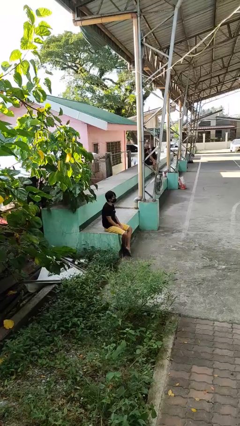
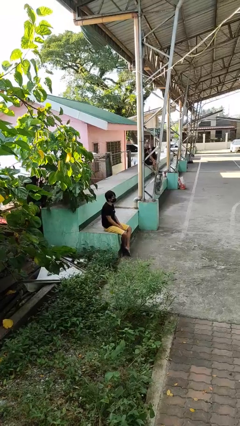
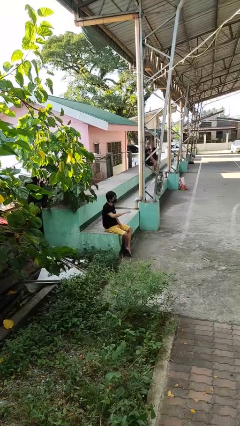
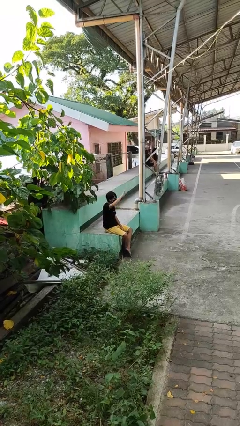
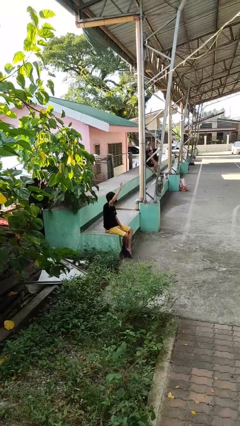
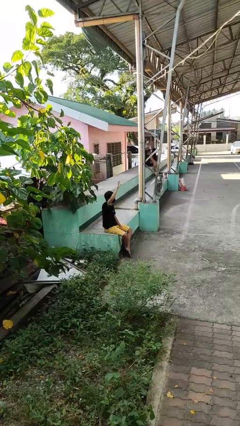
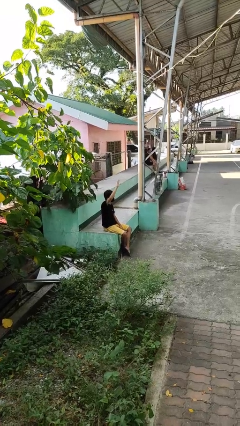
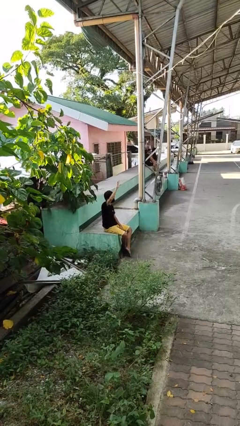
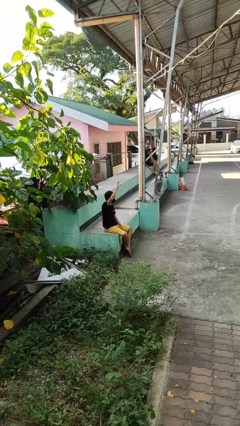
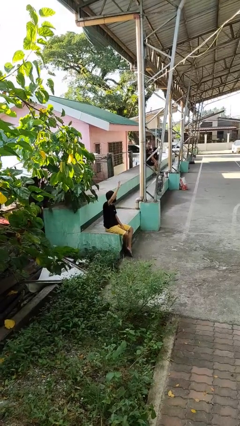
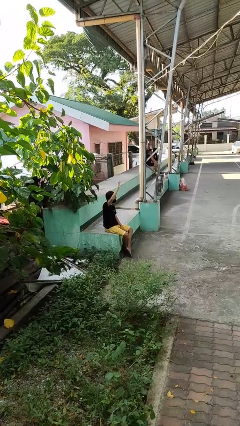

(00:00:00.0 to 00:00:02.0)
person gestures raise hand

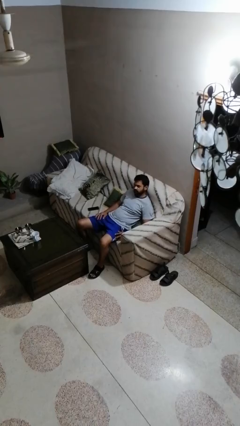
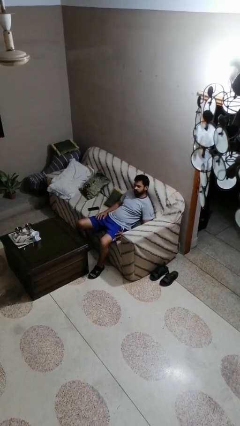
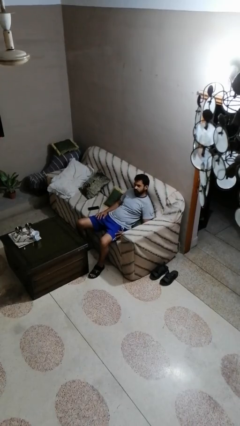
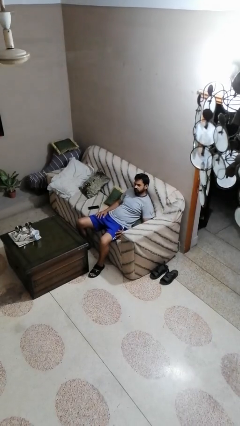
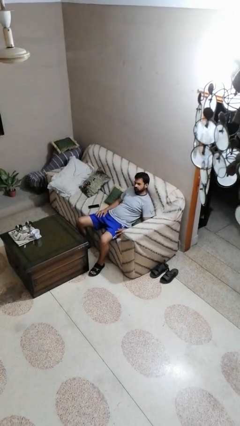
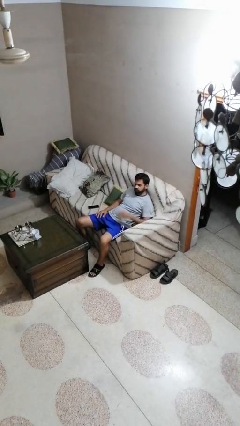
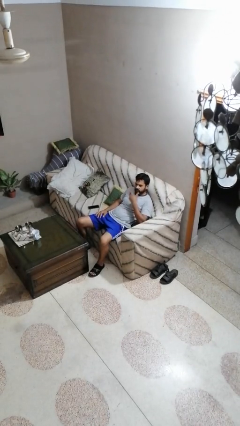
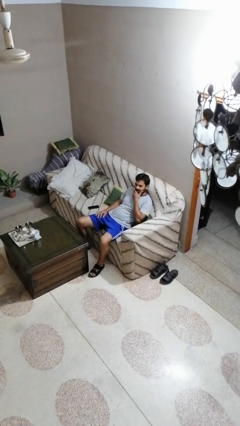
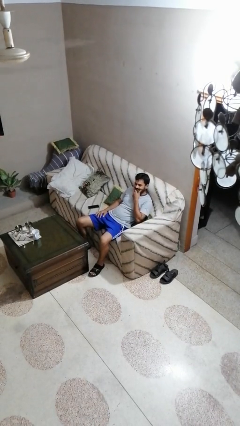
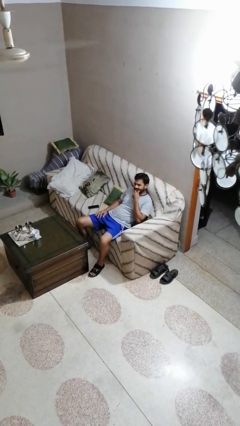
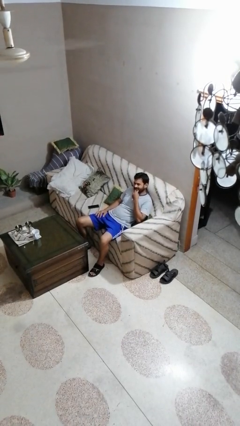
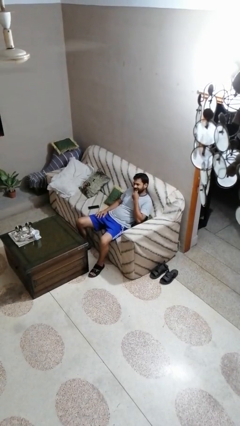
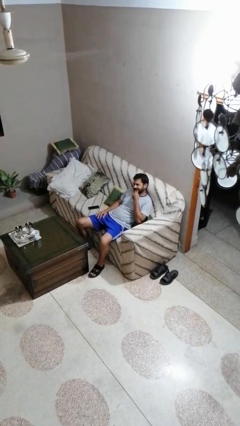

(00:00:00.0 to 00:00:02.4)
person strokes chin

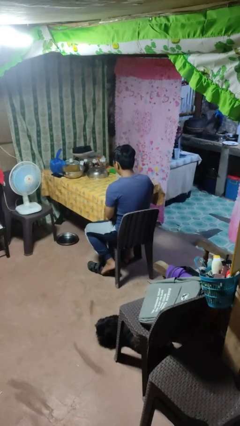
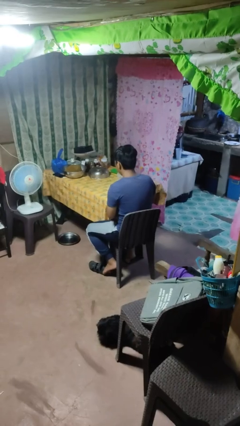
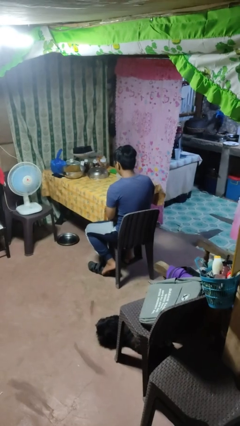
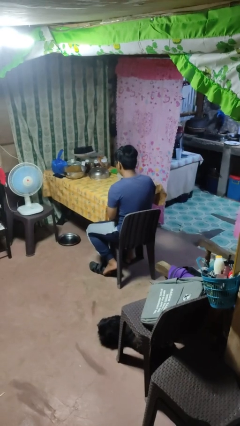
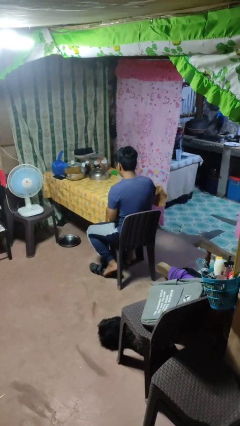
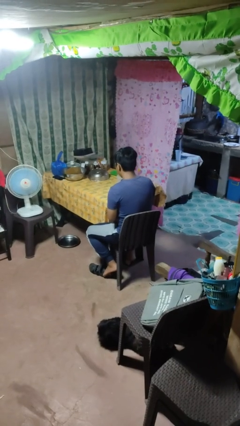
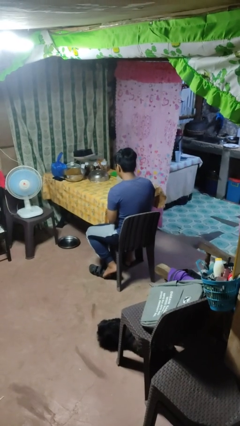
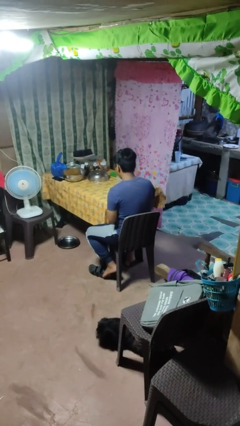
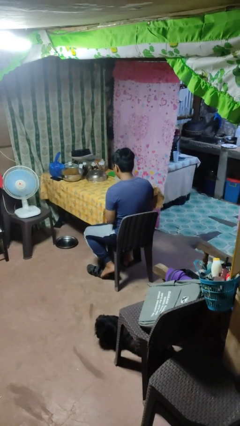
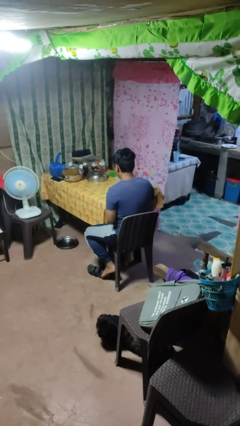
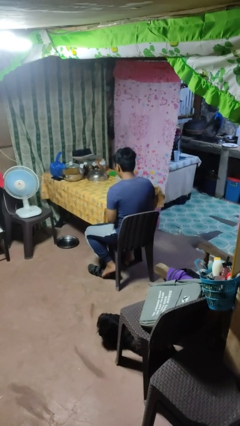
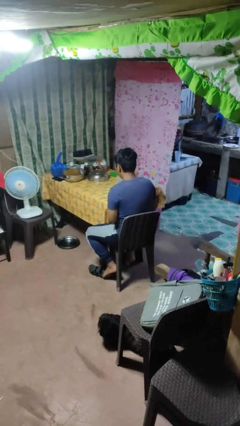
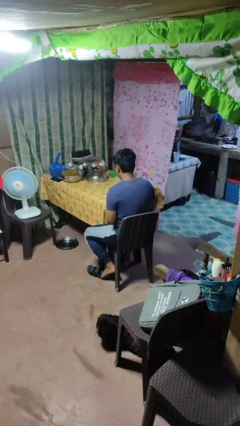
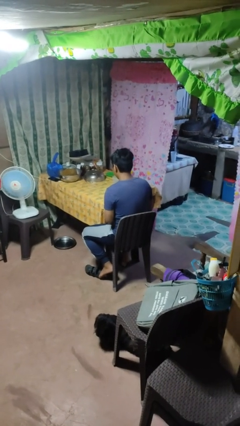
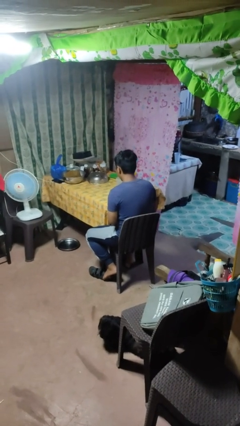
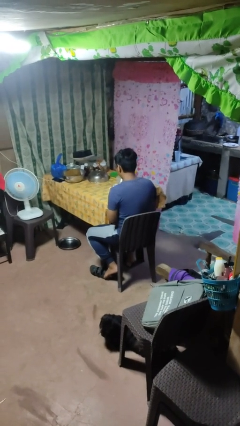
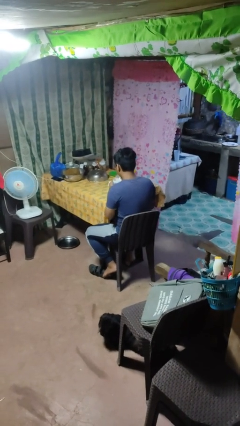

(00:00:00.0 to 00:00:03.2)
person stirs mug

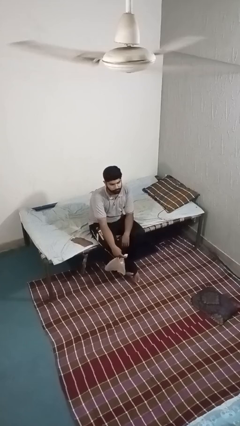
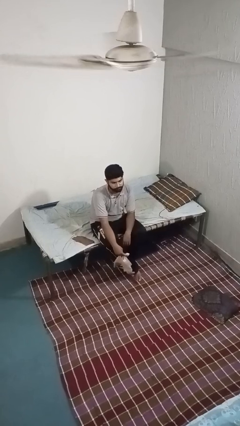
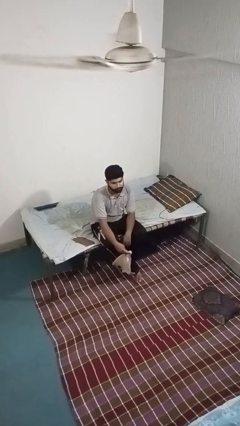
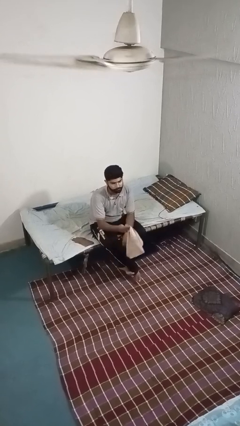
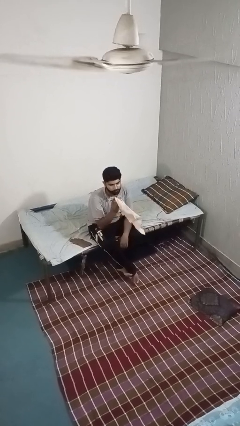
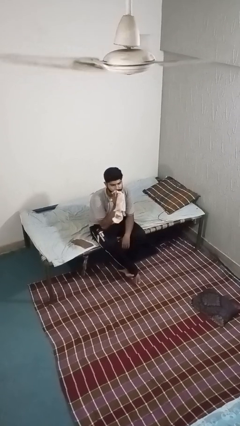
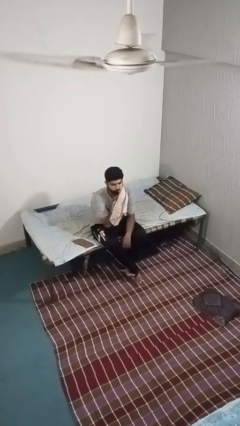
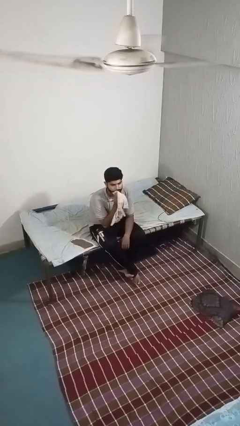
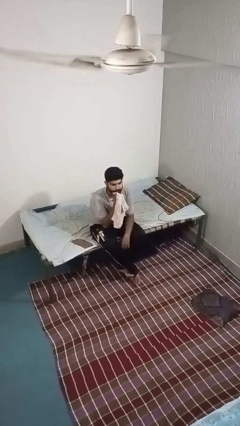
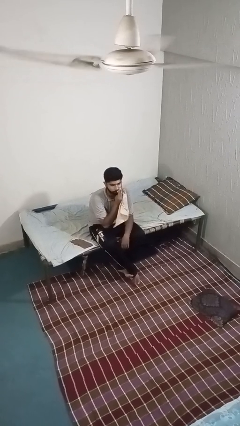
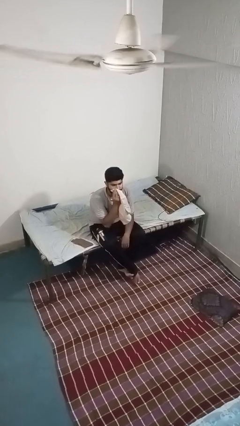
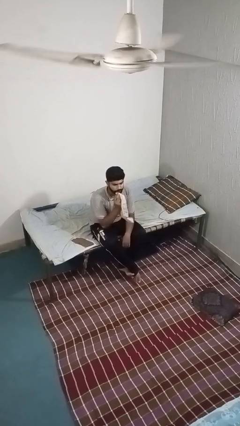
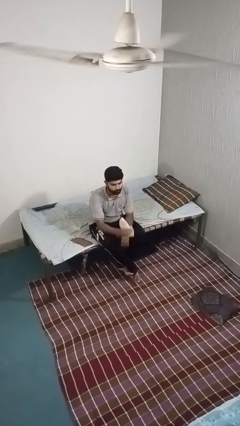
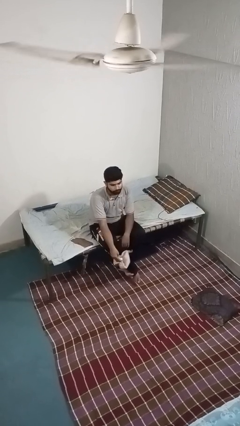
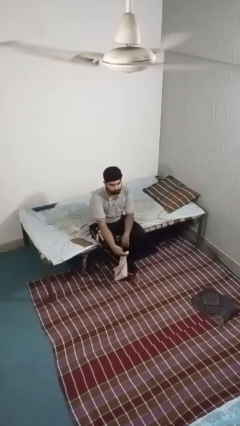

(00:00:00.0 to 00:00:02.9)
person wipes mouth with napkin

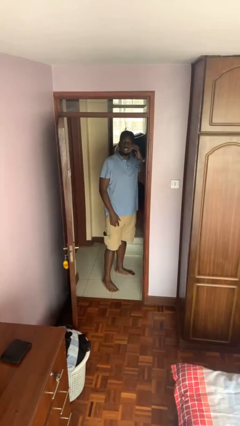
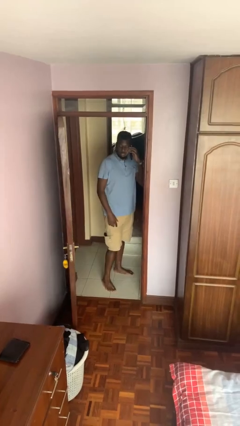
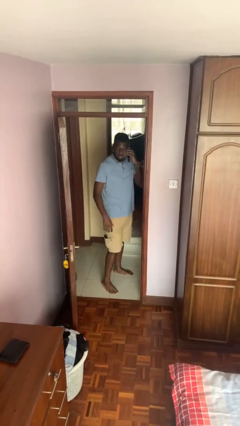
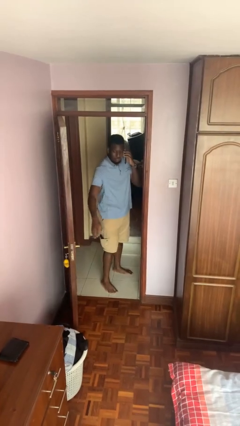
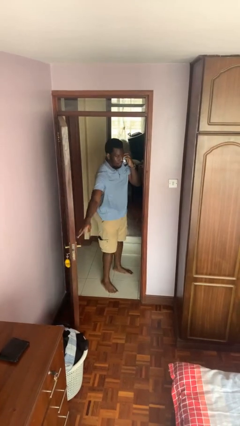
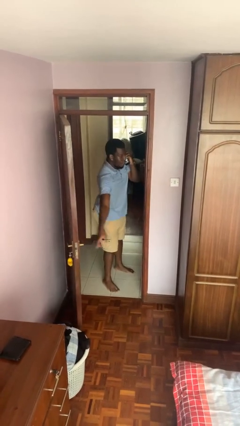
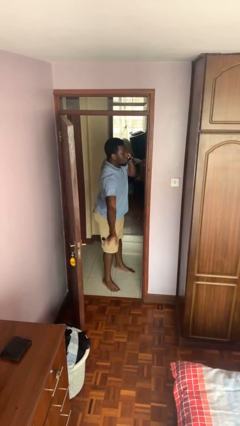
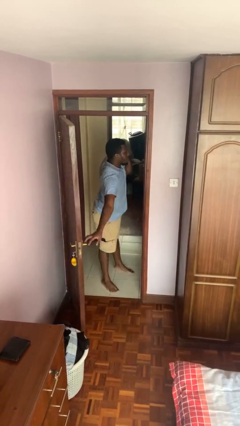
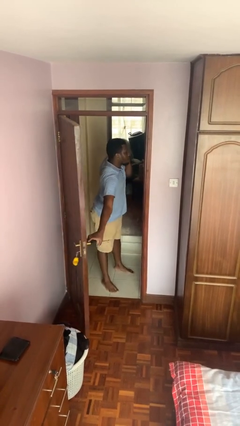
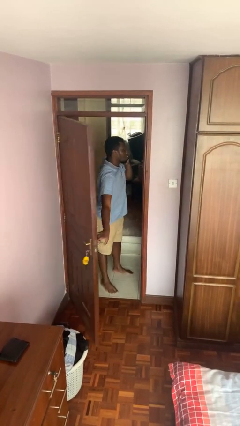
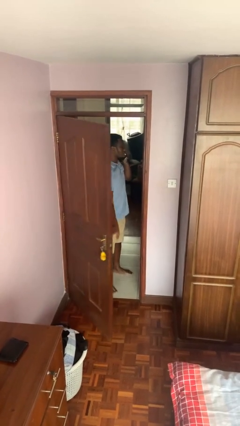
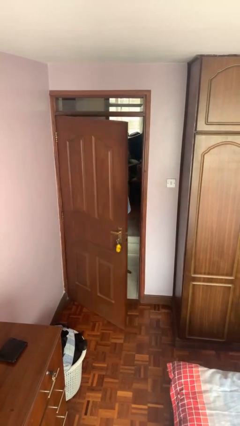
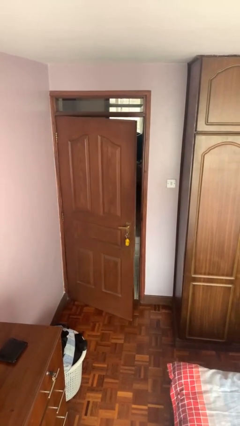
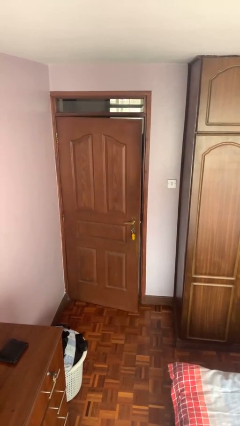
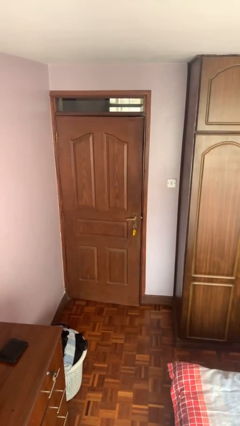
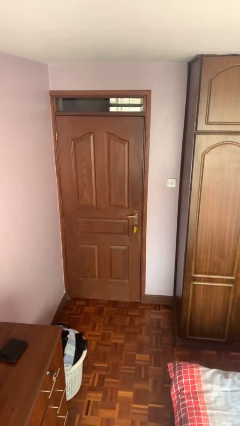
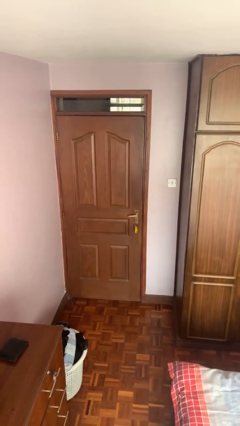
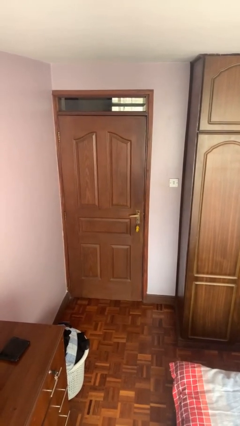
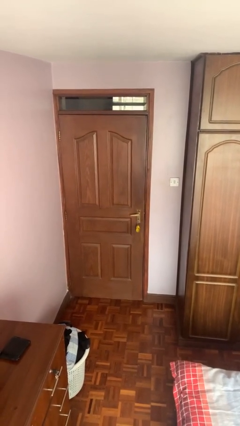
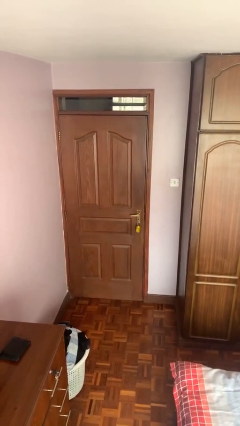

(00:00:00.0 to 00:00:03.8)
person closes facility door

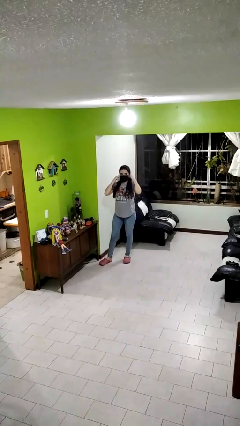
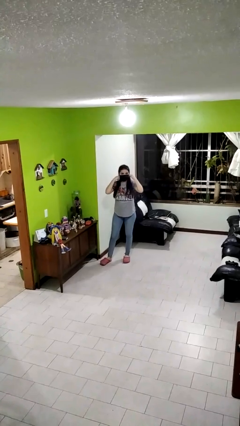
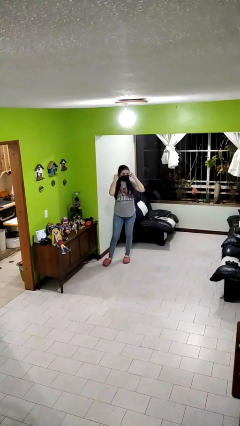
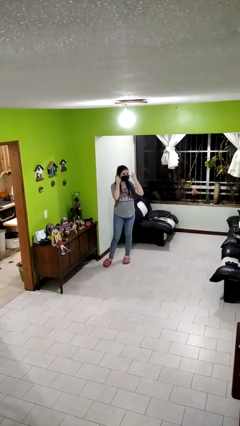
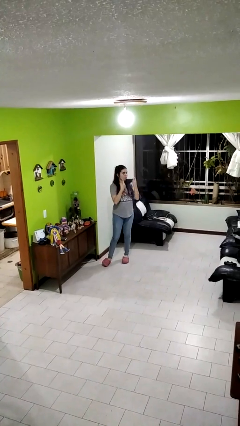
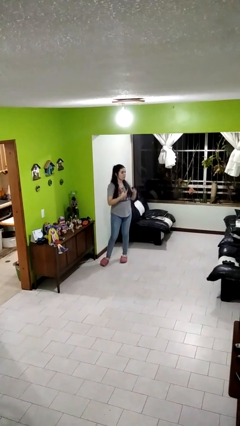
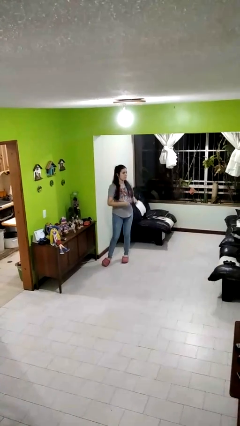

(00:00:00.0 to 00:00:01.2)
person takes off facemask

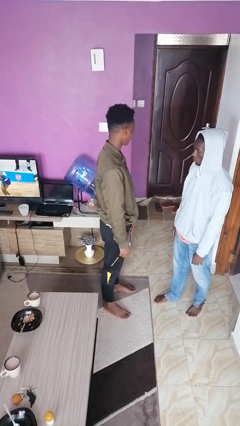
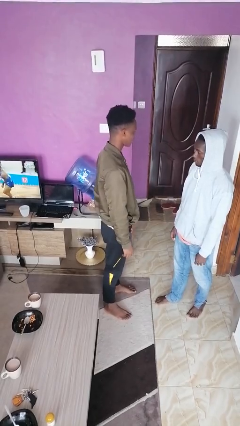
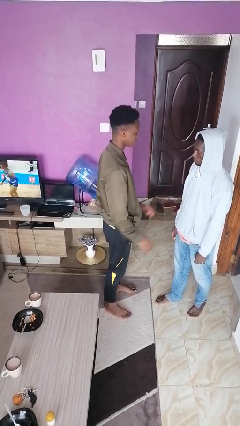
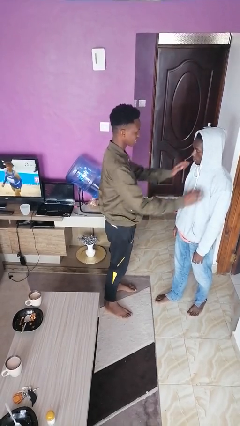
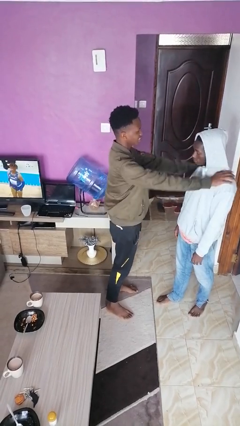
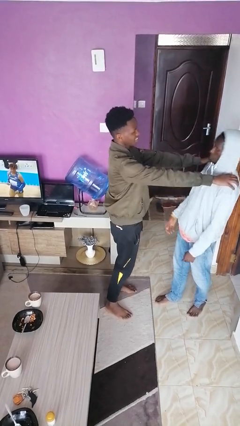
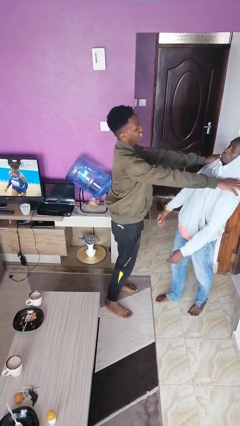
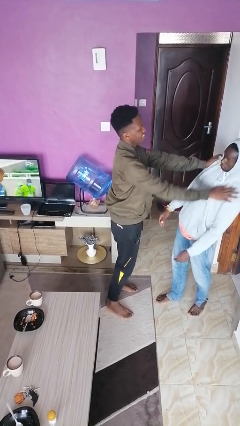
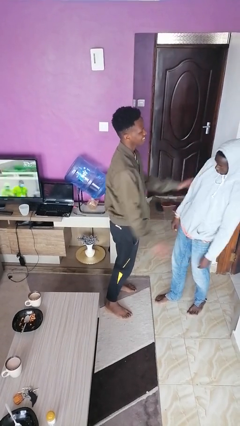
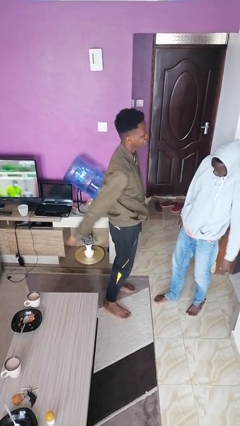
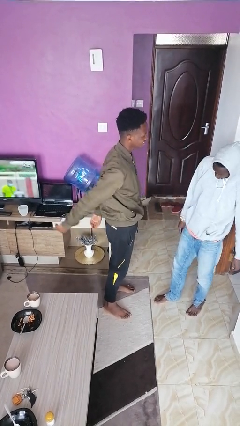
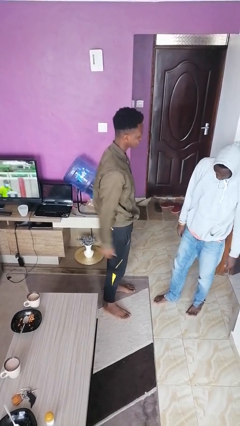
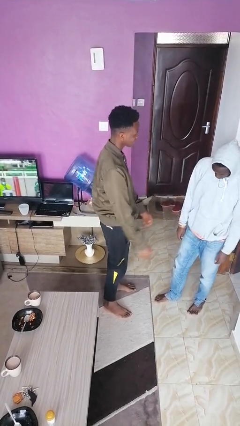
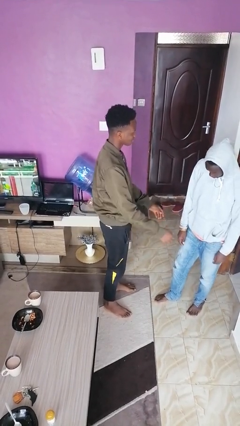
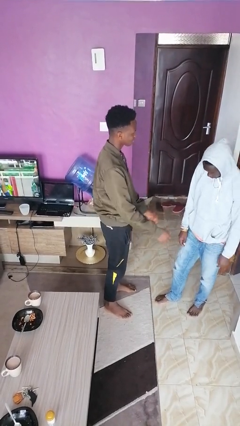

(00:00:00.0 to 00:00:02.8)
person shoves person
